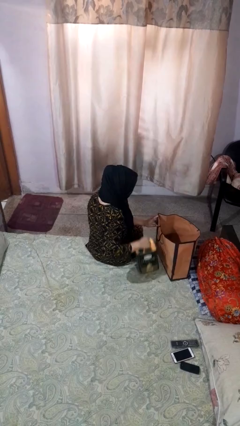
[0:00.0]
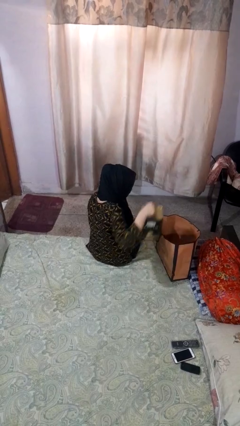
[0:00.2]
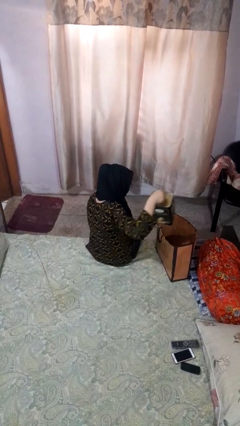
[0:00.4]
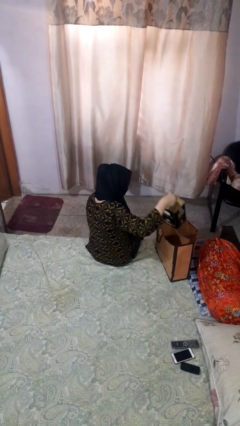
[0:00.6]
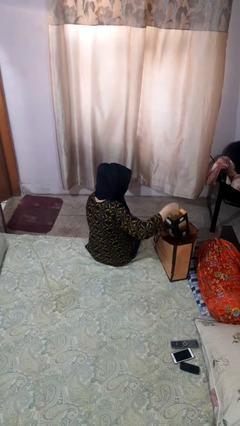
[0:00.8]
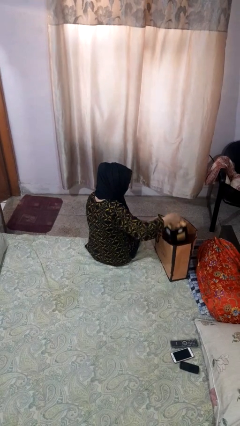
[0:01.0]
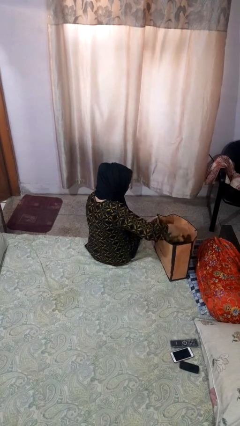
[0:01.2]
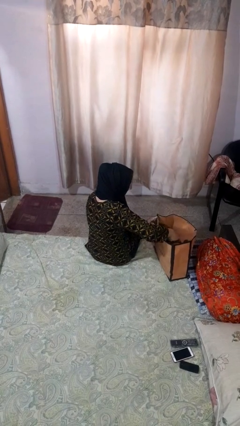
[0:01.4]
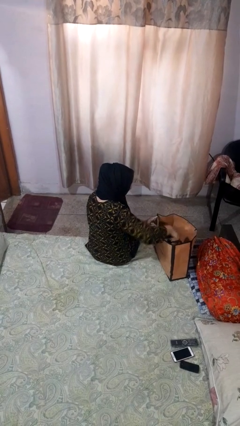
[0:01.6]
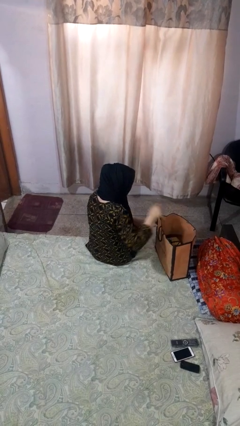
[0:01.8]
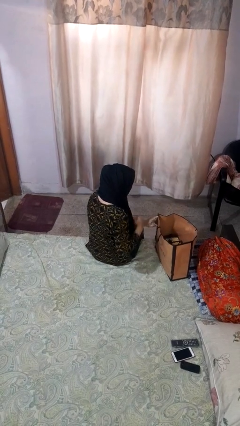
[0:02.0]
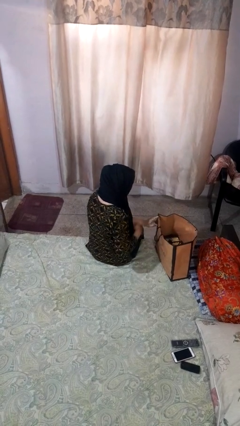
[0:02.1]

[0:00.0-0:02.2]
person puts object into bag

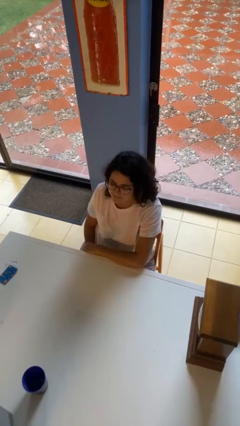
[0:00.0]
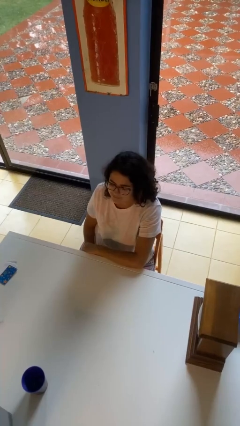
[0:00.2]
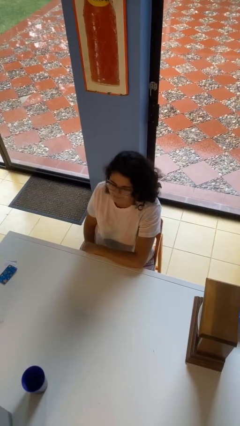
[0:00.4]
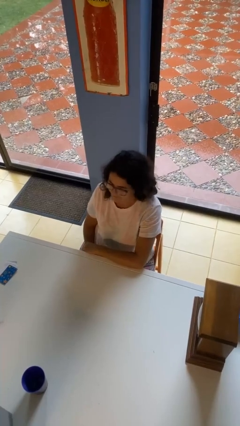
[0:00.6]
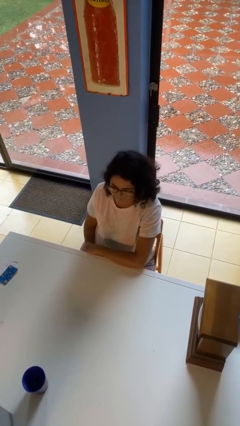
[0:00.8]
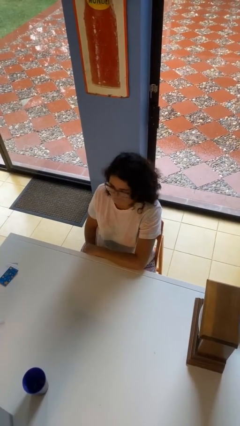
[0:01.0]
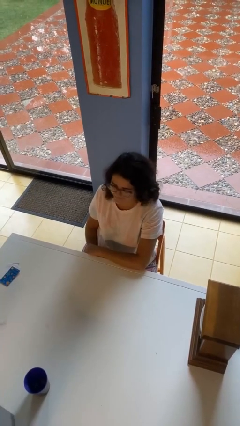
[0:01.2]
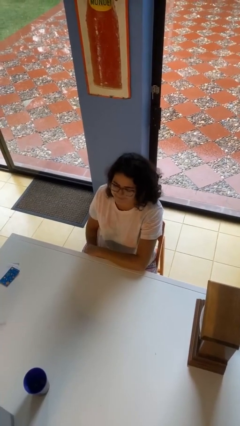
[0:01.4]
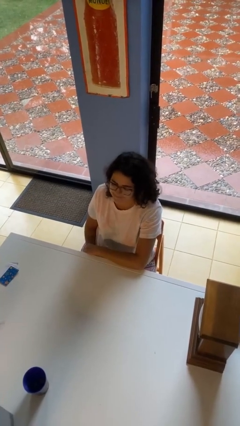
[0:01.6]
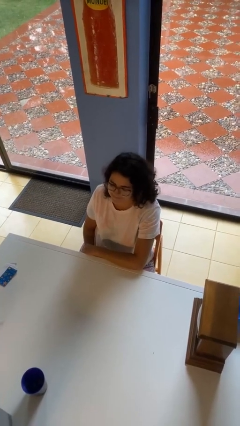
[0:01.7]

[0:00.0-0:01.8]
person shakes head

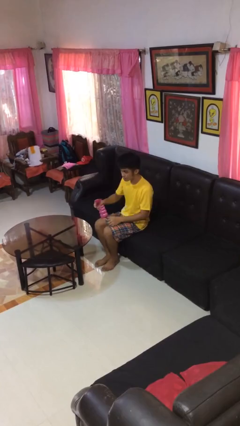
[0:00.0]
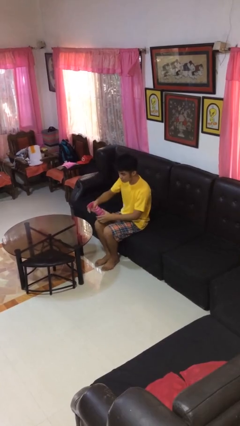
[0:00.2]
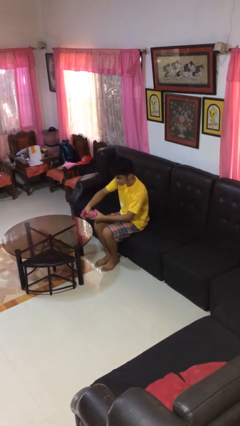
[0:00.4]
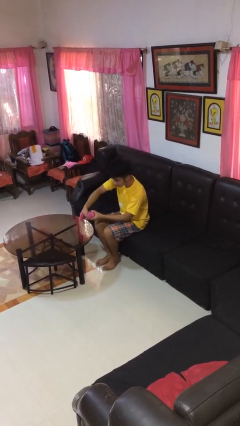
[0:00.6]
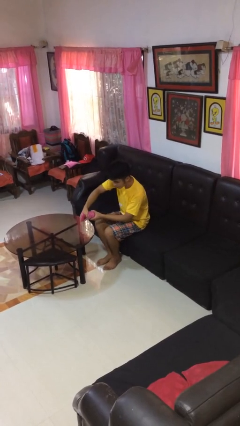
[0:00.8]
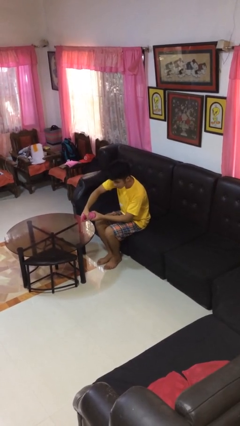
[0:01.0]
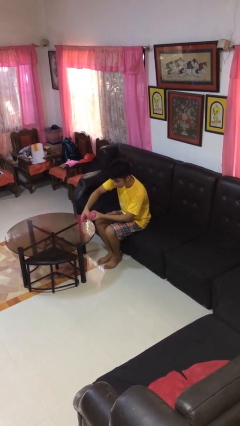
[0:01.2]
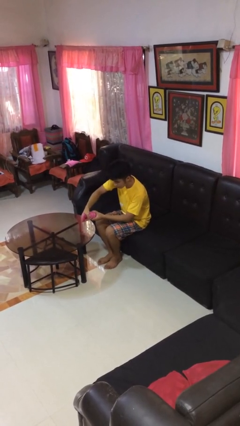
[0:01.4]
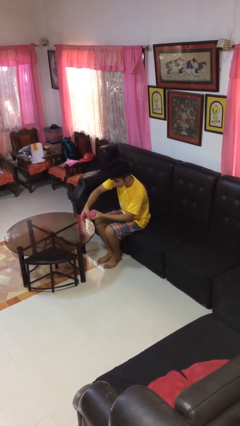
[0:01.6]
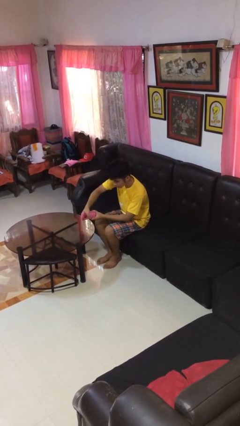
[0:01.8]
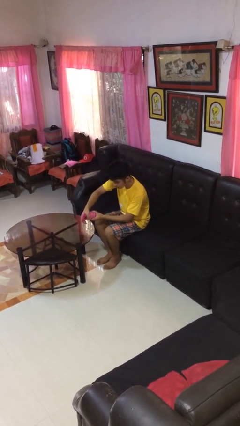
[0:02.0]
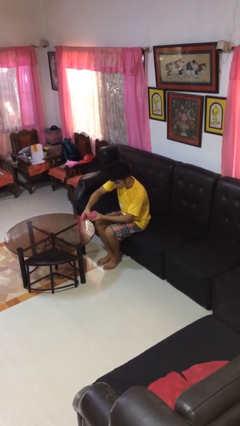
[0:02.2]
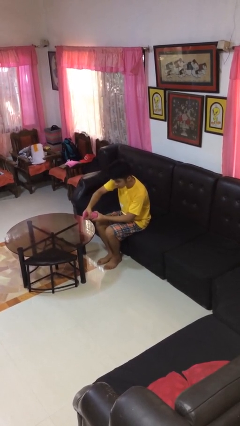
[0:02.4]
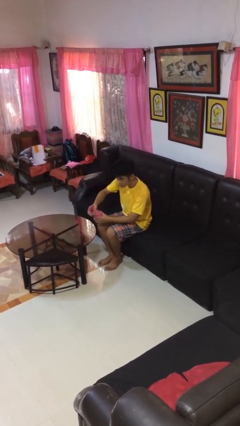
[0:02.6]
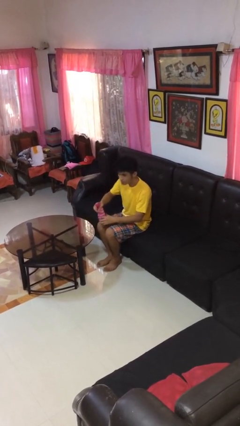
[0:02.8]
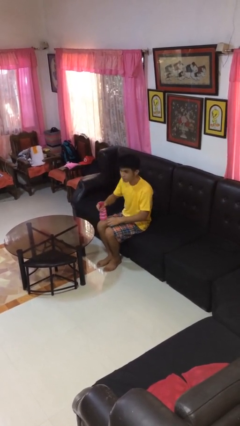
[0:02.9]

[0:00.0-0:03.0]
person sprays from bottle

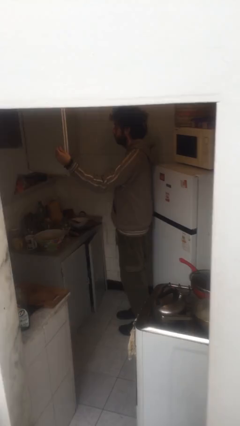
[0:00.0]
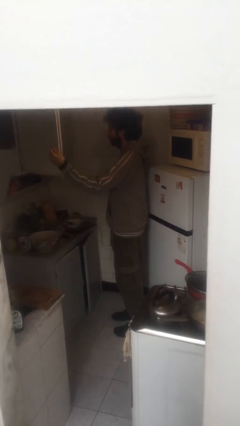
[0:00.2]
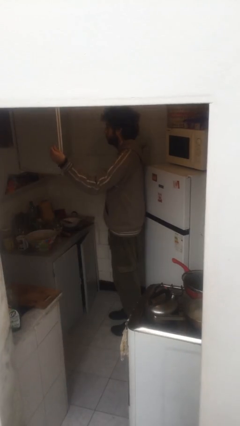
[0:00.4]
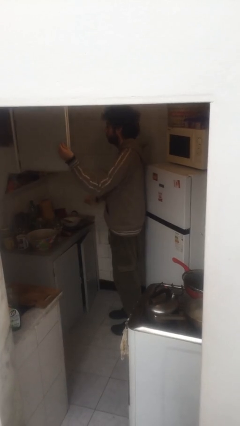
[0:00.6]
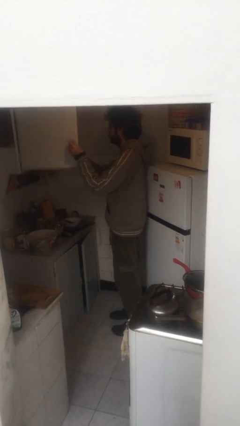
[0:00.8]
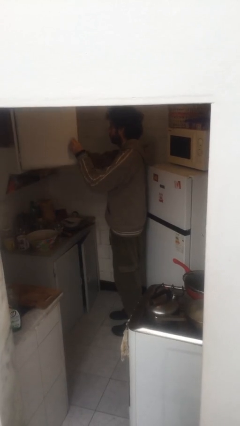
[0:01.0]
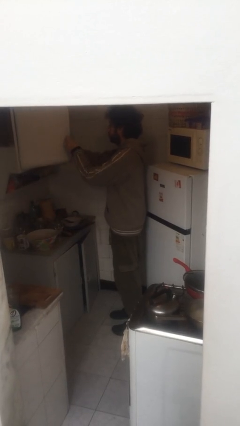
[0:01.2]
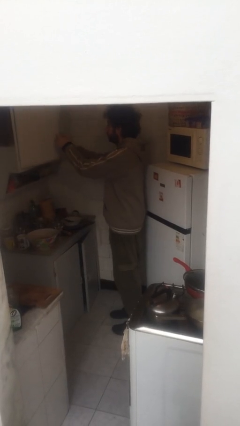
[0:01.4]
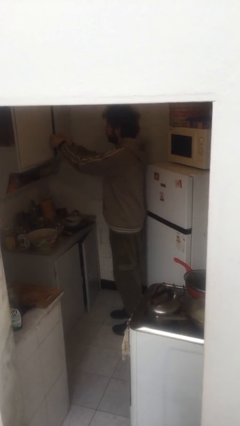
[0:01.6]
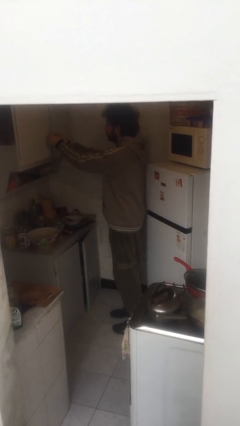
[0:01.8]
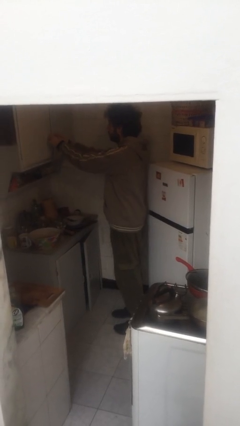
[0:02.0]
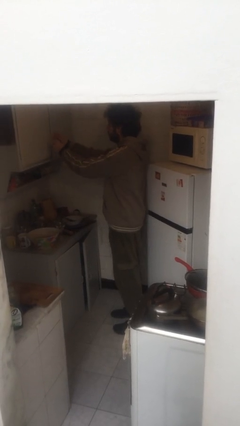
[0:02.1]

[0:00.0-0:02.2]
person closes cabinet

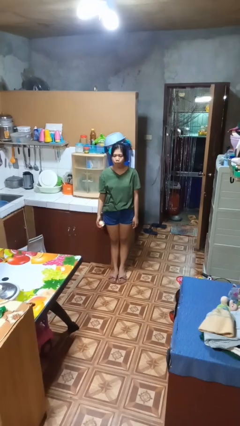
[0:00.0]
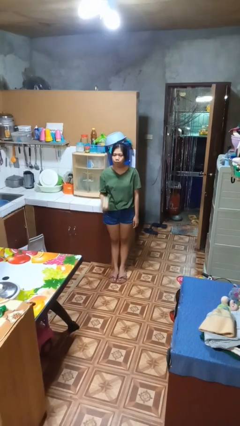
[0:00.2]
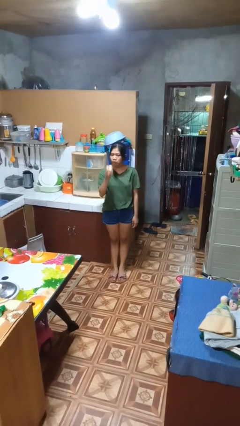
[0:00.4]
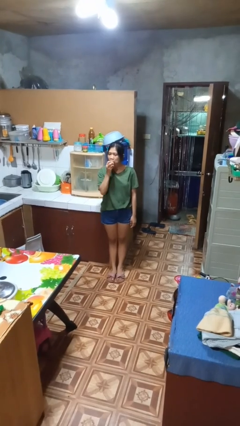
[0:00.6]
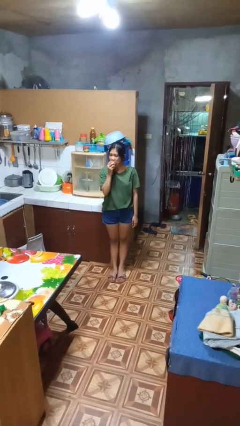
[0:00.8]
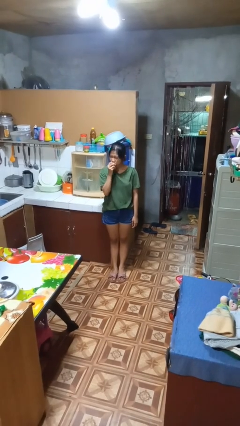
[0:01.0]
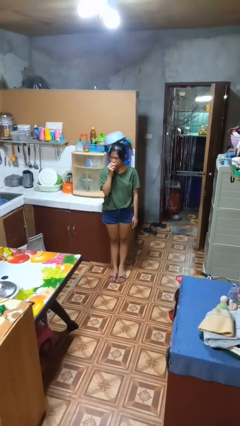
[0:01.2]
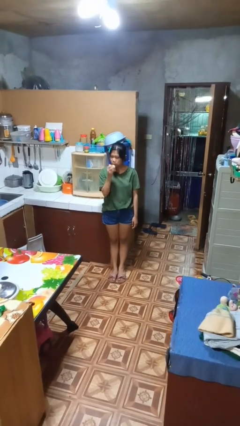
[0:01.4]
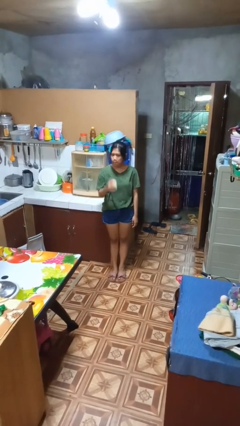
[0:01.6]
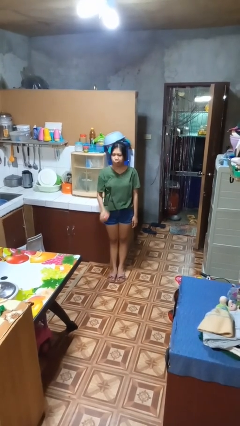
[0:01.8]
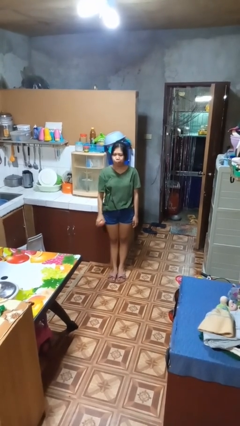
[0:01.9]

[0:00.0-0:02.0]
person eats apple

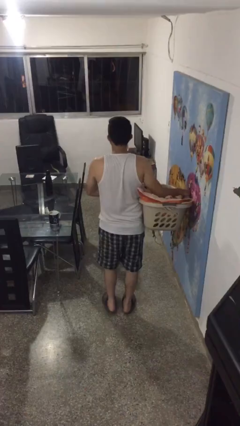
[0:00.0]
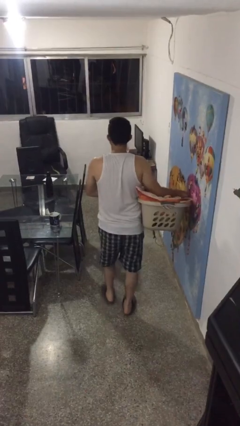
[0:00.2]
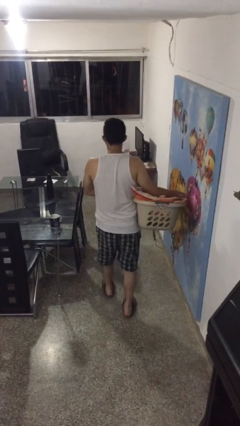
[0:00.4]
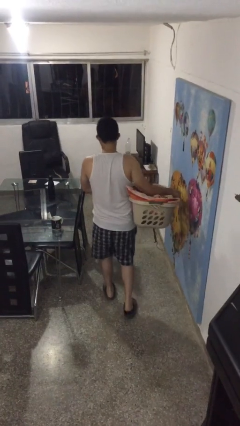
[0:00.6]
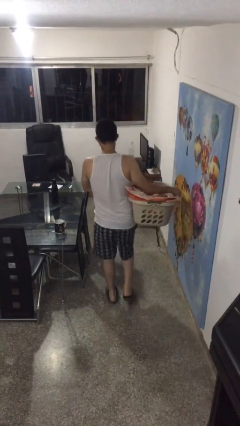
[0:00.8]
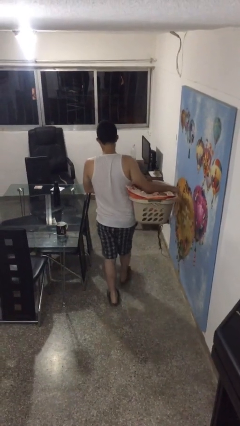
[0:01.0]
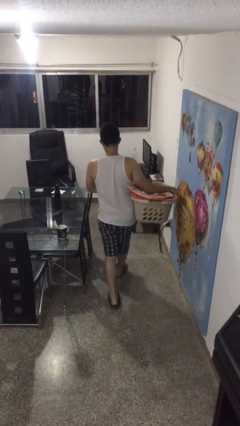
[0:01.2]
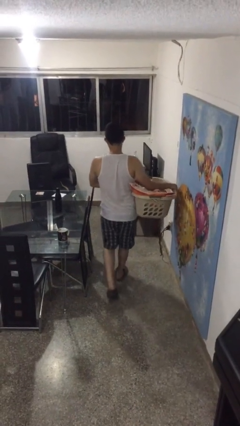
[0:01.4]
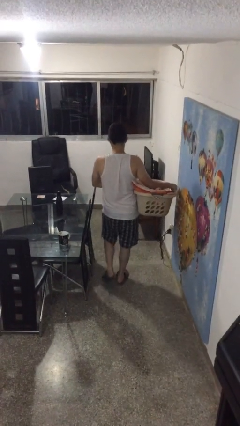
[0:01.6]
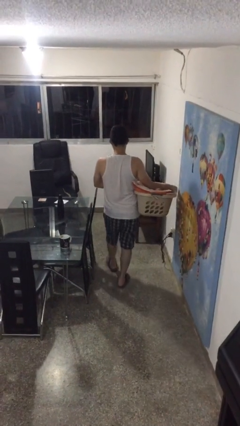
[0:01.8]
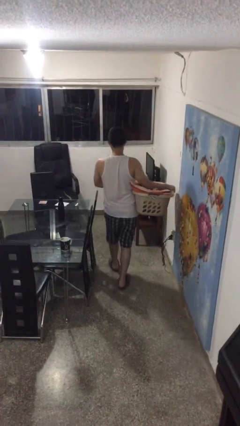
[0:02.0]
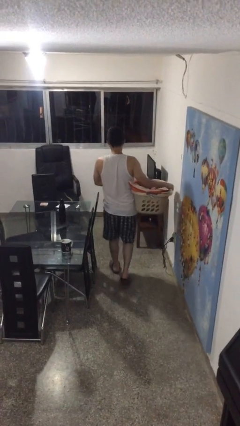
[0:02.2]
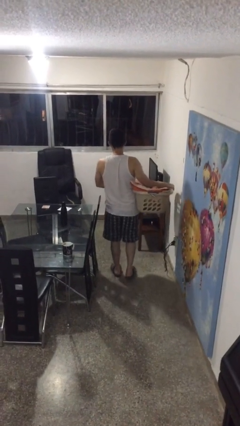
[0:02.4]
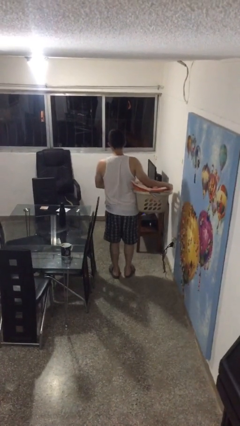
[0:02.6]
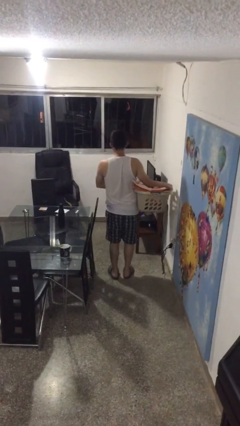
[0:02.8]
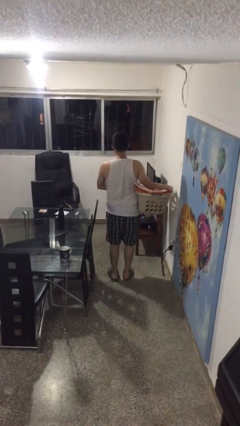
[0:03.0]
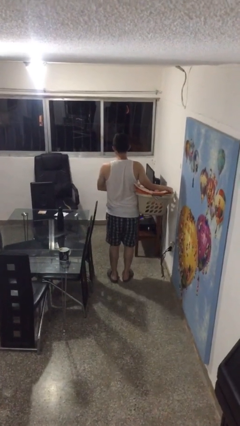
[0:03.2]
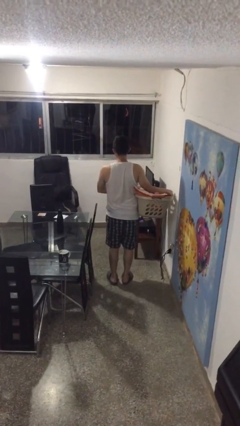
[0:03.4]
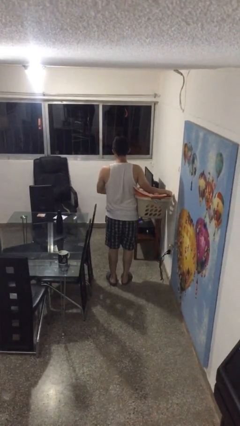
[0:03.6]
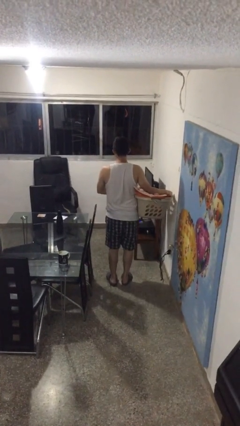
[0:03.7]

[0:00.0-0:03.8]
person carries laundry basket

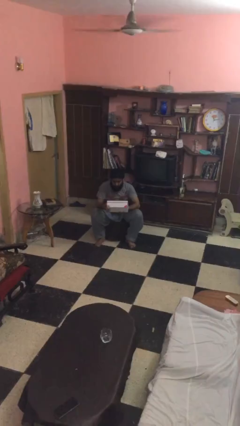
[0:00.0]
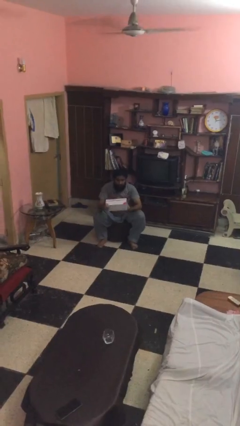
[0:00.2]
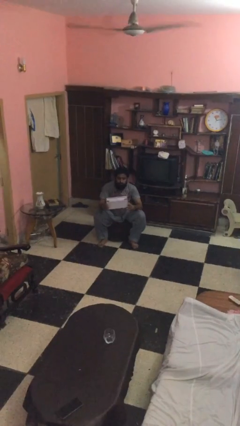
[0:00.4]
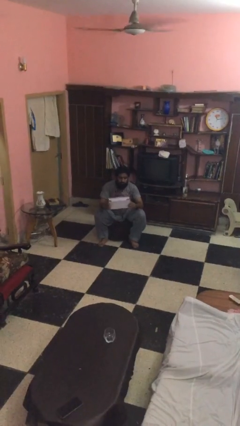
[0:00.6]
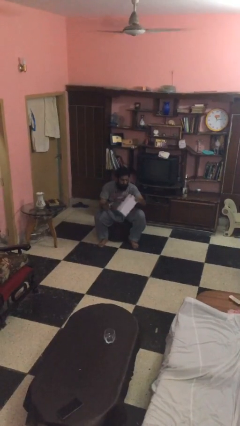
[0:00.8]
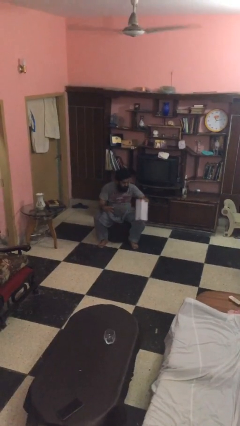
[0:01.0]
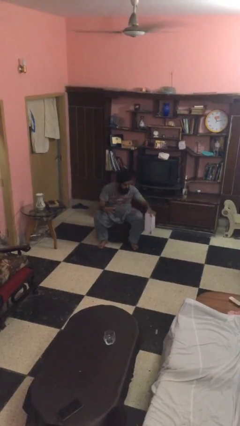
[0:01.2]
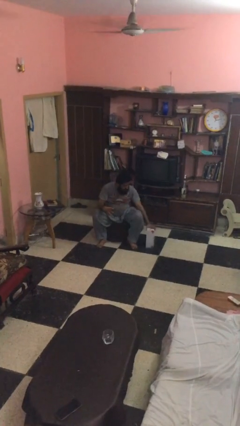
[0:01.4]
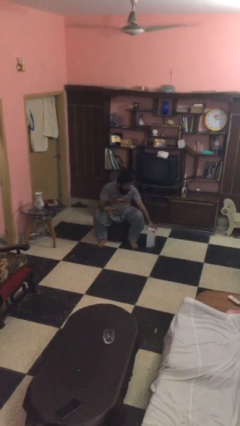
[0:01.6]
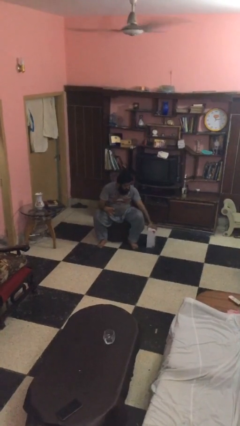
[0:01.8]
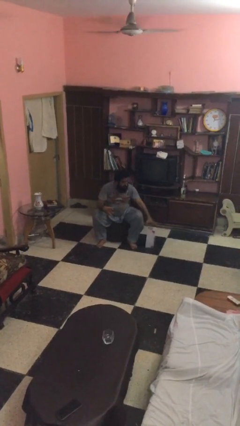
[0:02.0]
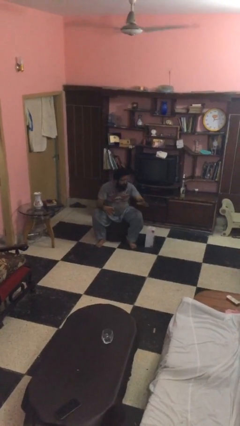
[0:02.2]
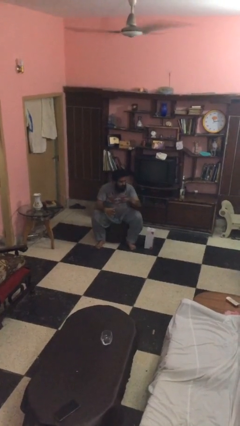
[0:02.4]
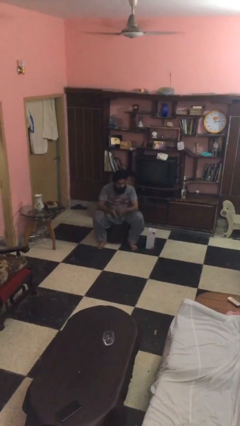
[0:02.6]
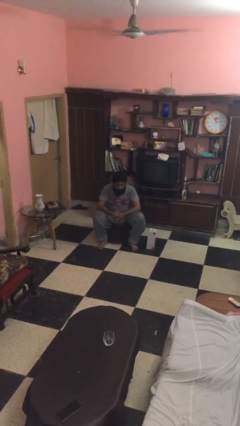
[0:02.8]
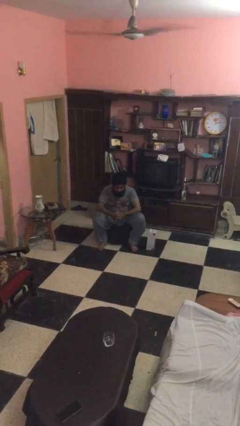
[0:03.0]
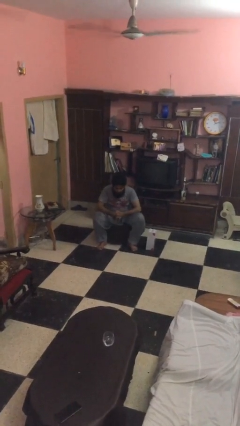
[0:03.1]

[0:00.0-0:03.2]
person puts down object on floor
